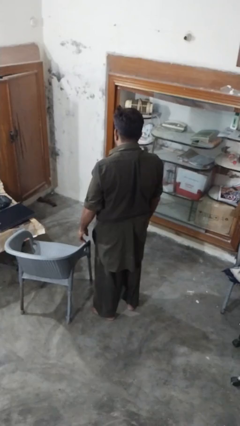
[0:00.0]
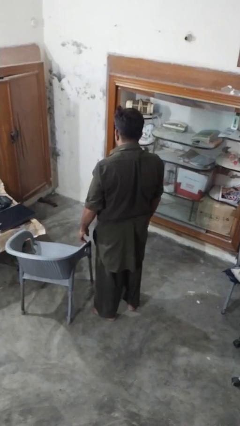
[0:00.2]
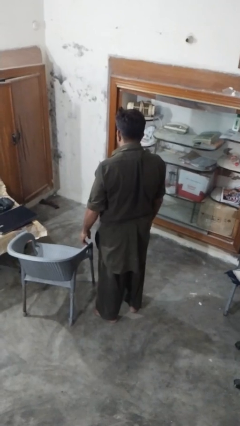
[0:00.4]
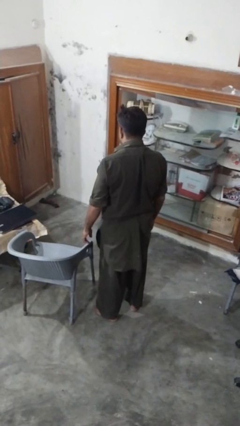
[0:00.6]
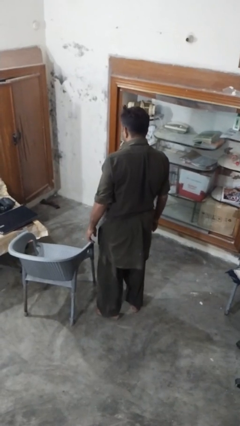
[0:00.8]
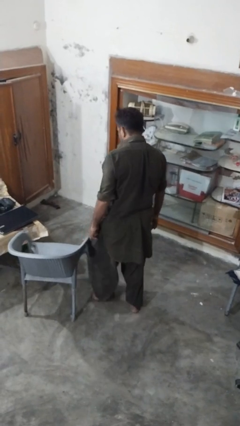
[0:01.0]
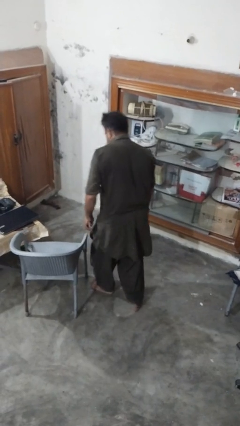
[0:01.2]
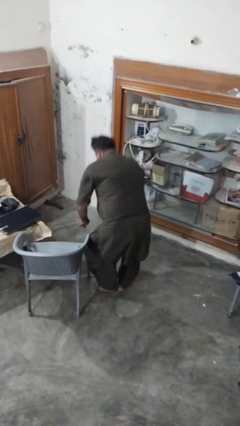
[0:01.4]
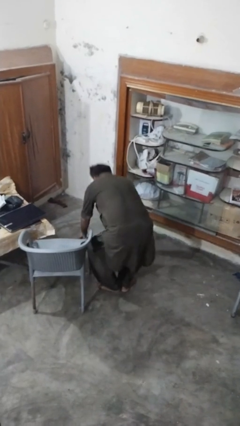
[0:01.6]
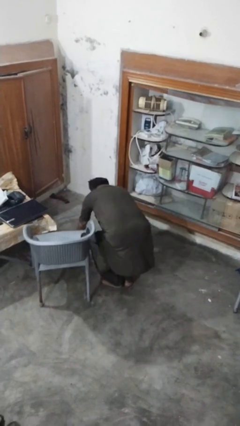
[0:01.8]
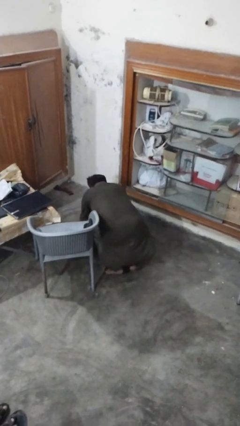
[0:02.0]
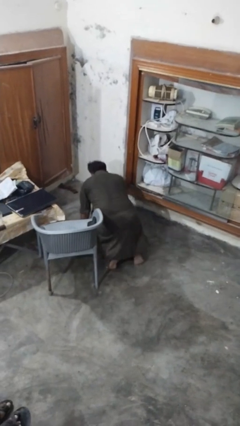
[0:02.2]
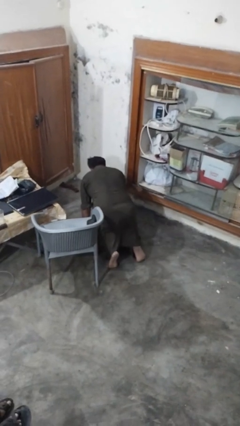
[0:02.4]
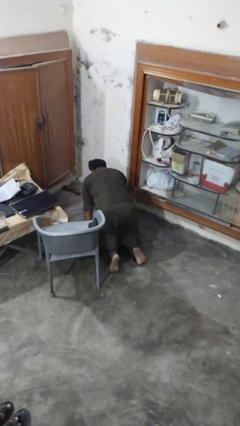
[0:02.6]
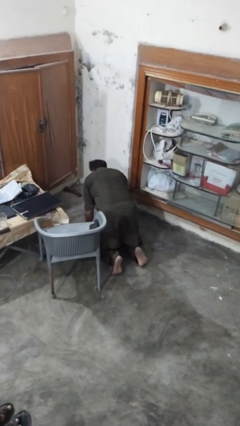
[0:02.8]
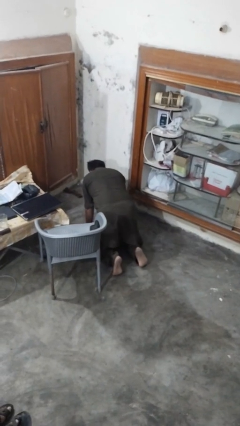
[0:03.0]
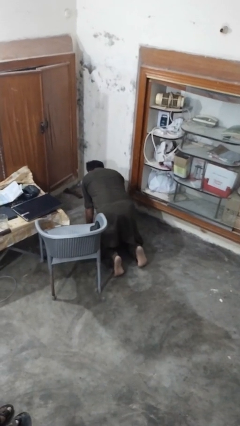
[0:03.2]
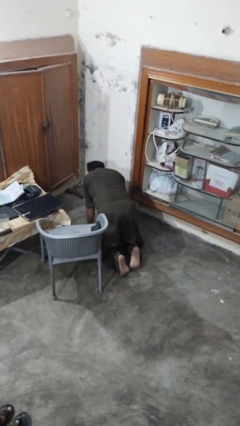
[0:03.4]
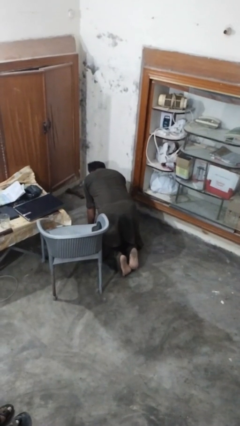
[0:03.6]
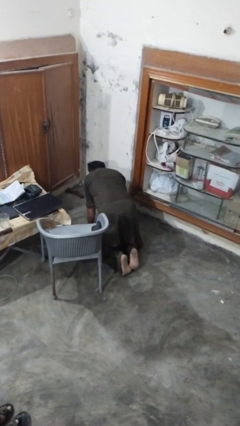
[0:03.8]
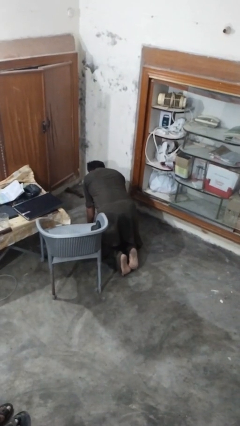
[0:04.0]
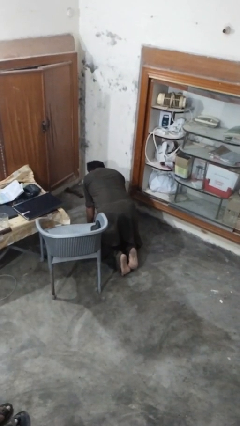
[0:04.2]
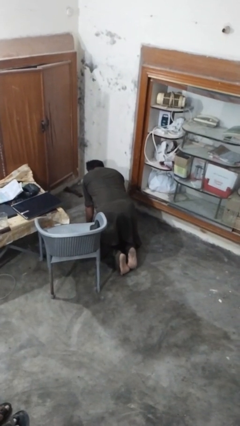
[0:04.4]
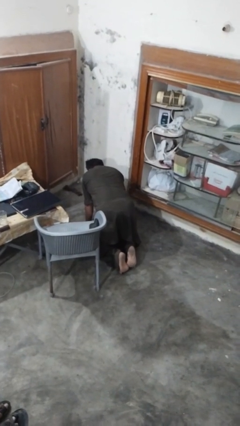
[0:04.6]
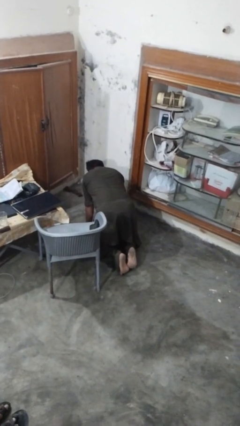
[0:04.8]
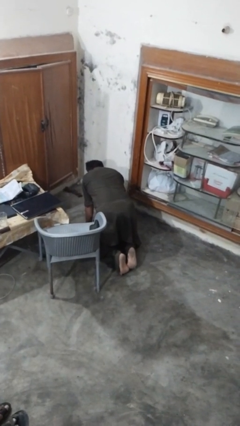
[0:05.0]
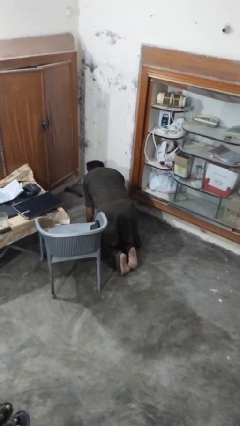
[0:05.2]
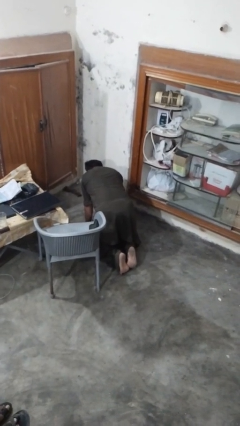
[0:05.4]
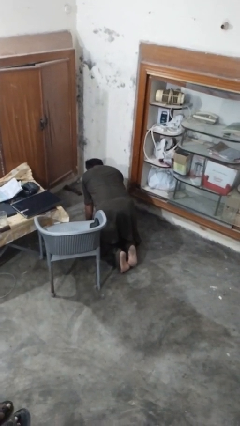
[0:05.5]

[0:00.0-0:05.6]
person trips on object on floor

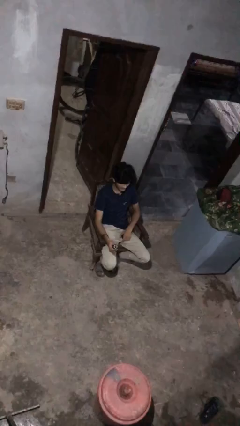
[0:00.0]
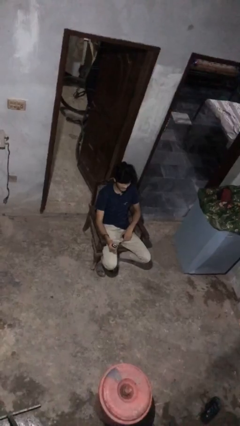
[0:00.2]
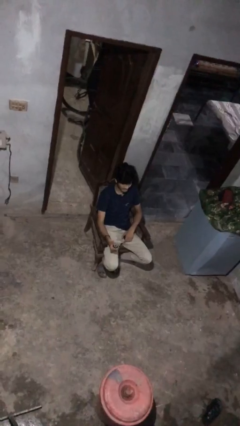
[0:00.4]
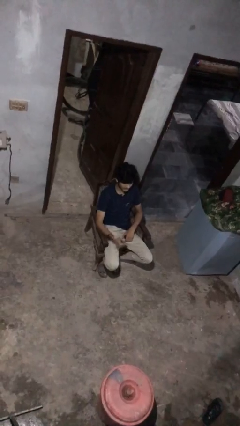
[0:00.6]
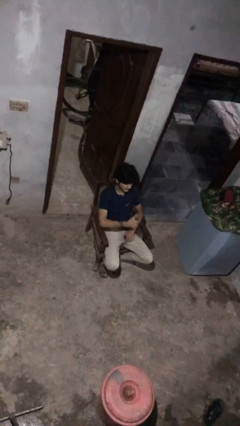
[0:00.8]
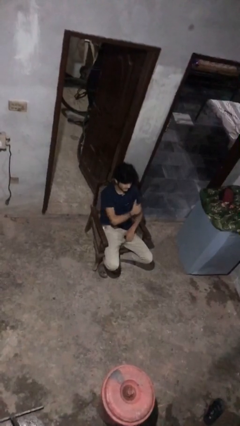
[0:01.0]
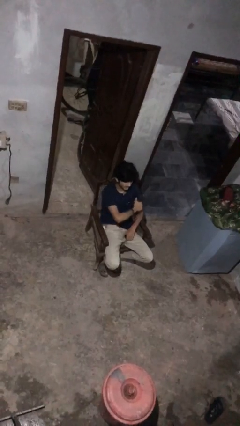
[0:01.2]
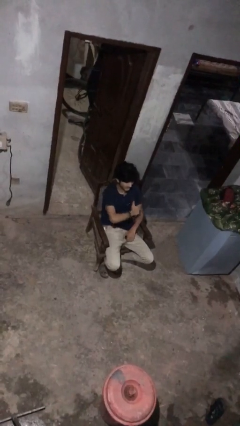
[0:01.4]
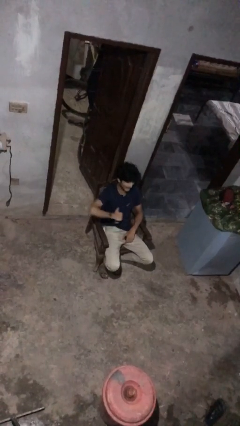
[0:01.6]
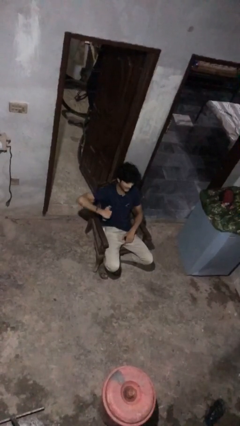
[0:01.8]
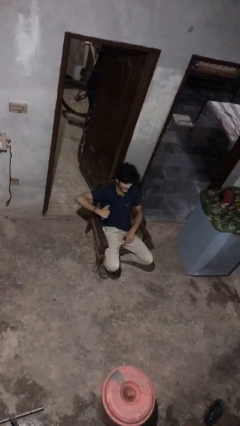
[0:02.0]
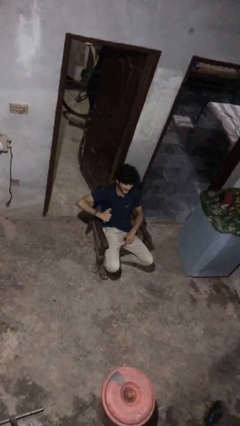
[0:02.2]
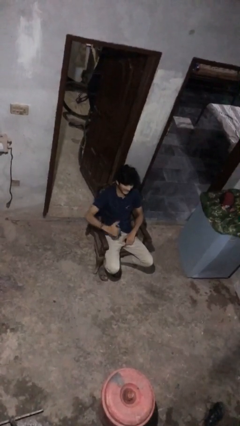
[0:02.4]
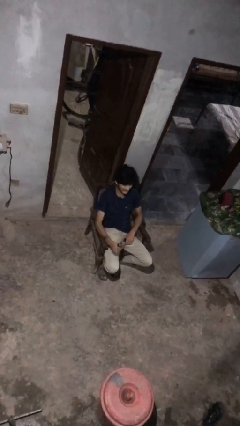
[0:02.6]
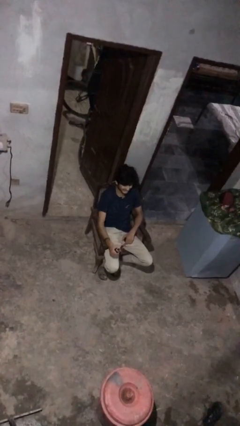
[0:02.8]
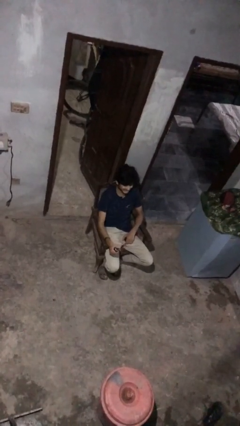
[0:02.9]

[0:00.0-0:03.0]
person applies deodorant

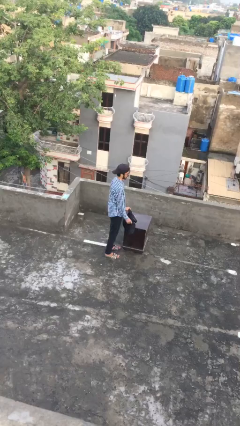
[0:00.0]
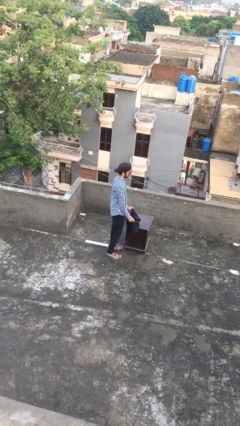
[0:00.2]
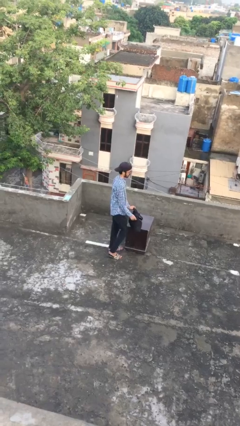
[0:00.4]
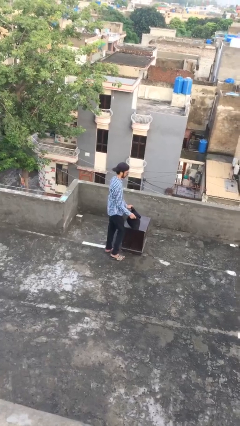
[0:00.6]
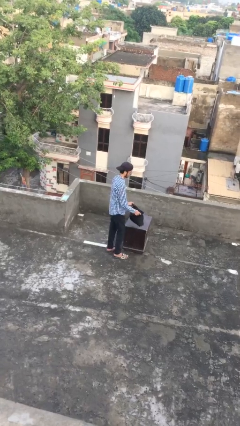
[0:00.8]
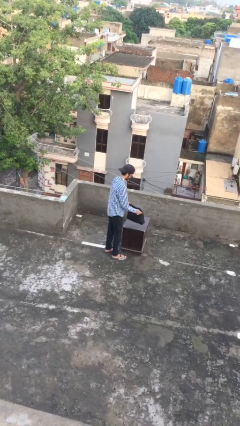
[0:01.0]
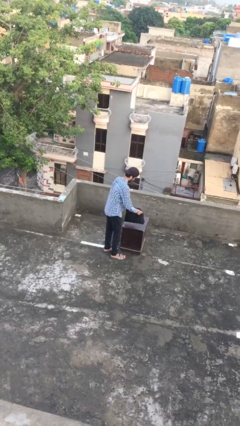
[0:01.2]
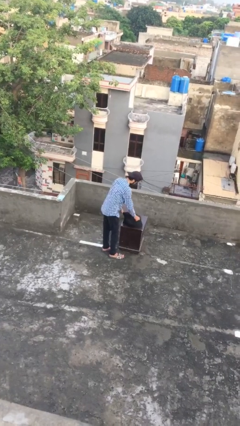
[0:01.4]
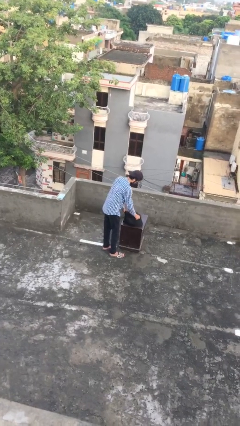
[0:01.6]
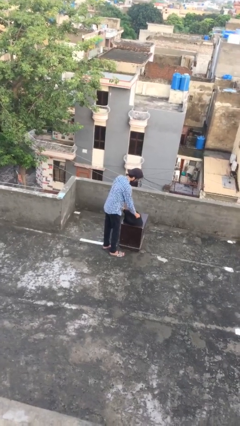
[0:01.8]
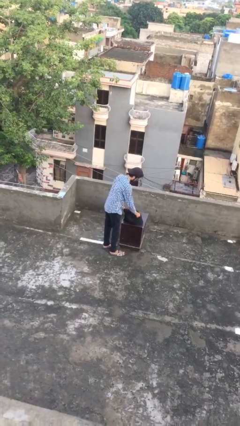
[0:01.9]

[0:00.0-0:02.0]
person puts down object on table

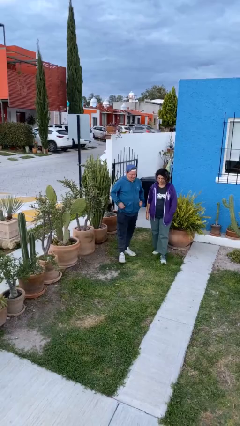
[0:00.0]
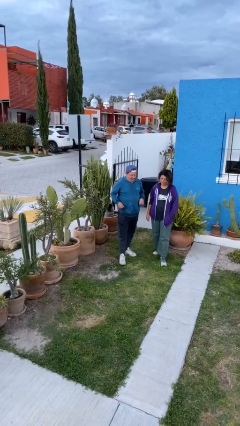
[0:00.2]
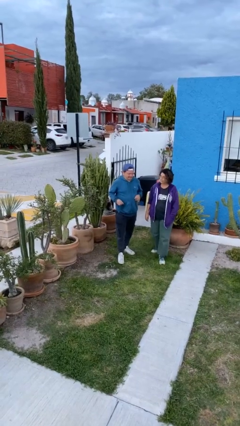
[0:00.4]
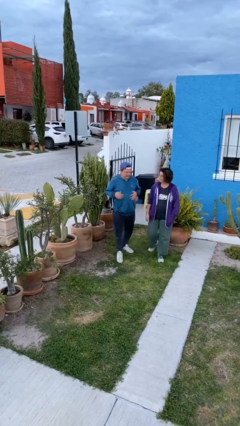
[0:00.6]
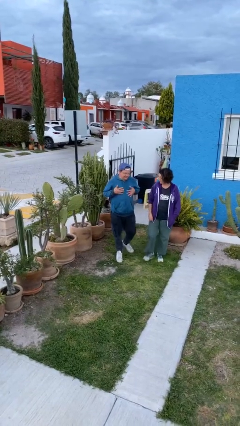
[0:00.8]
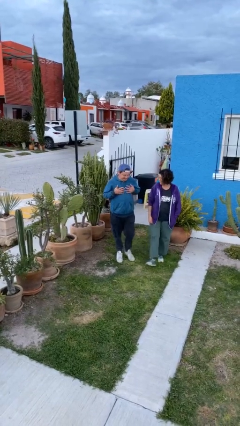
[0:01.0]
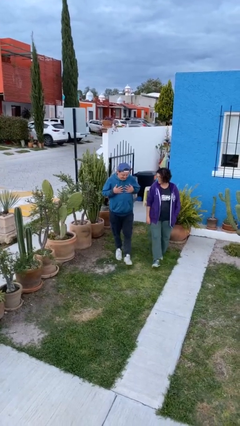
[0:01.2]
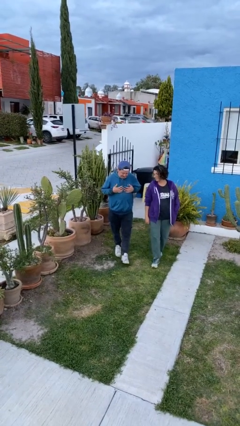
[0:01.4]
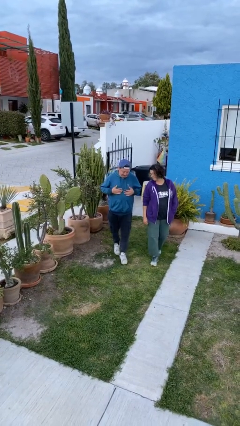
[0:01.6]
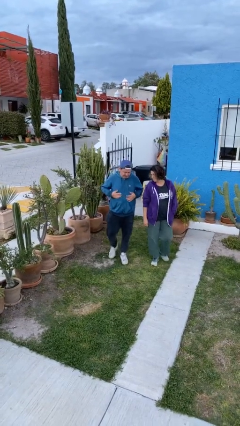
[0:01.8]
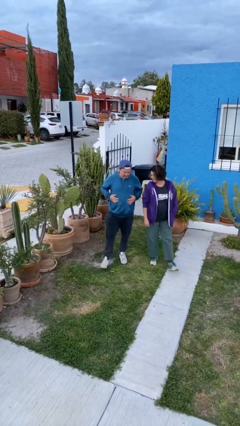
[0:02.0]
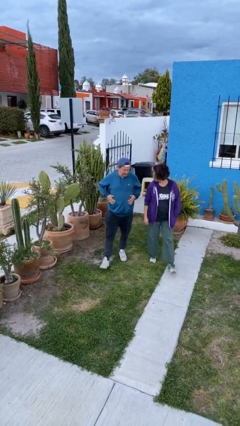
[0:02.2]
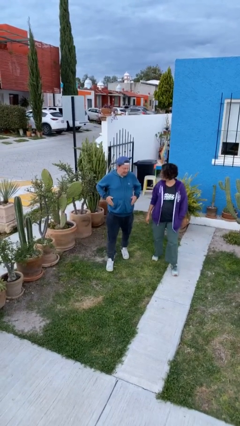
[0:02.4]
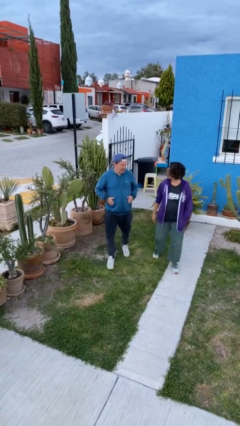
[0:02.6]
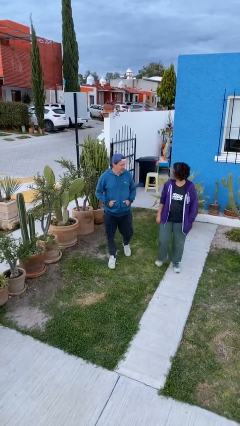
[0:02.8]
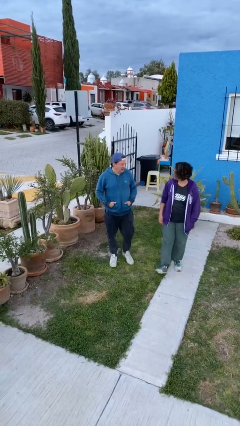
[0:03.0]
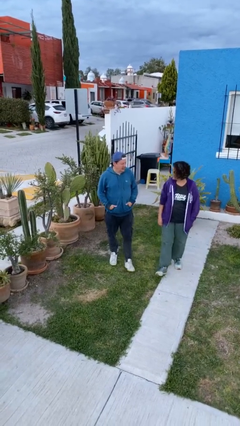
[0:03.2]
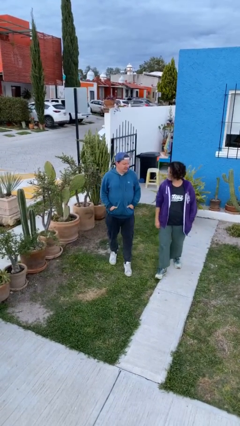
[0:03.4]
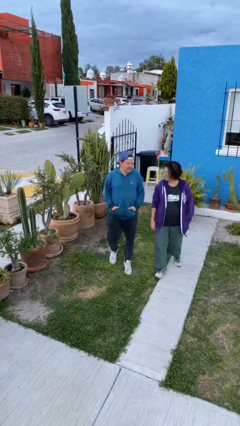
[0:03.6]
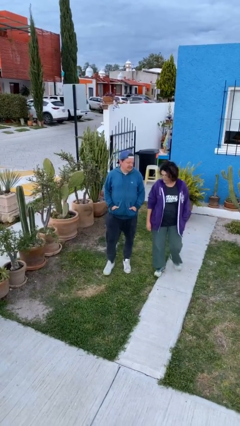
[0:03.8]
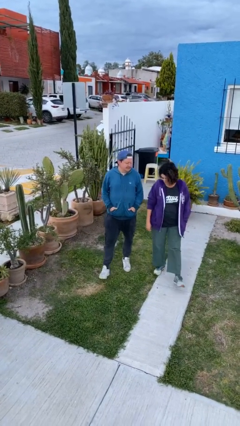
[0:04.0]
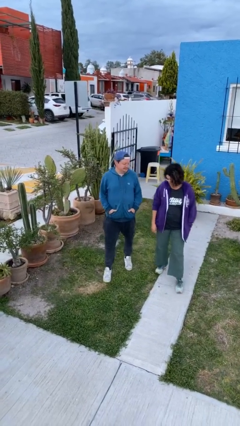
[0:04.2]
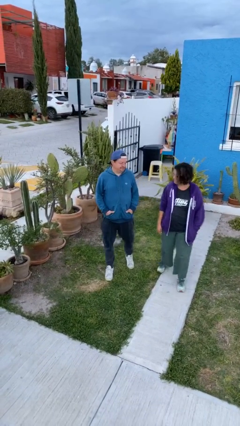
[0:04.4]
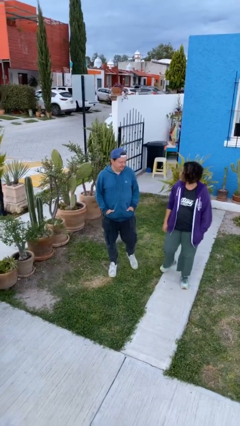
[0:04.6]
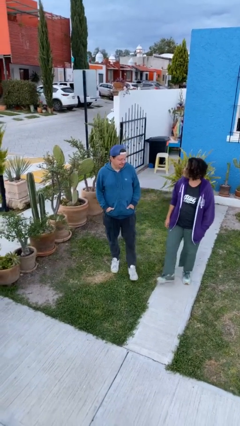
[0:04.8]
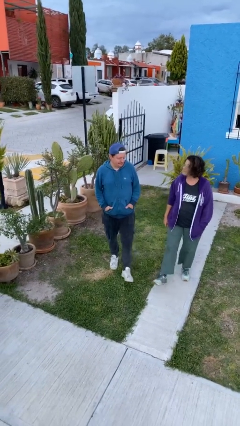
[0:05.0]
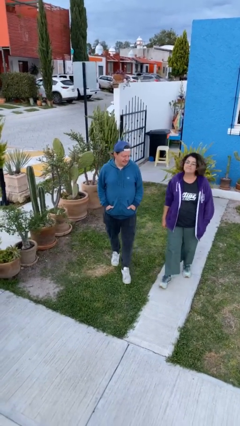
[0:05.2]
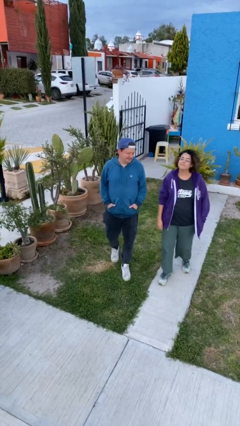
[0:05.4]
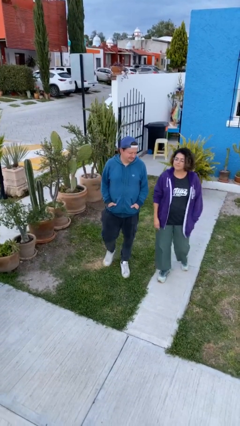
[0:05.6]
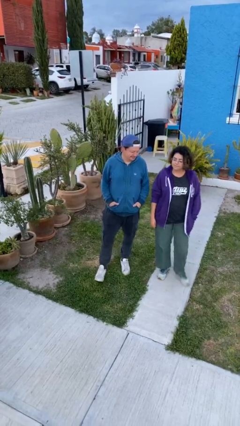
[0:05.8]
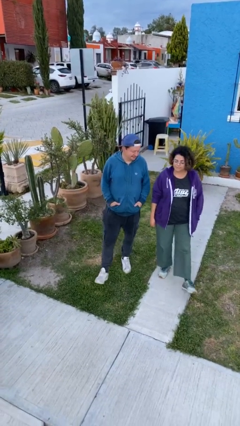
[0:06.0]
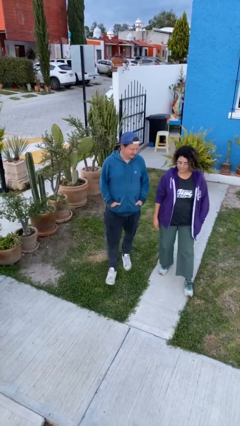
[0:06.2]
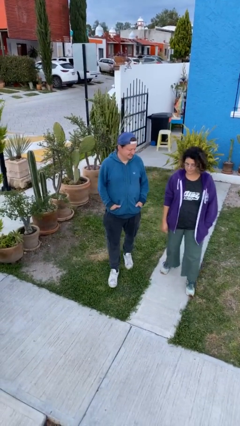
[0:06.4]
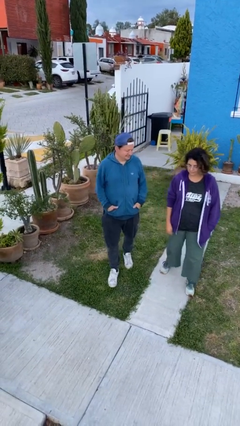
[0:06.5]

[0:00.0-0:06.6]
person talks to person

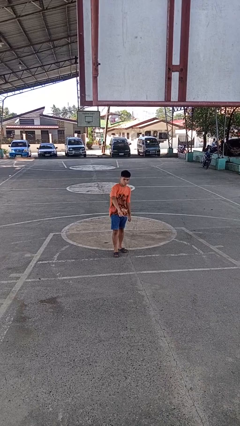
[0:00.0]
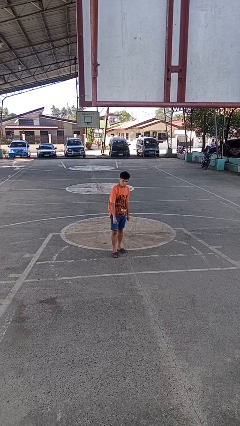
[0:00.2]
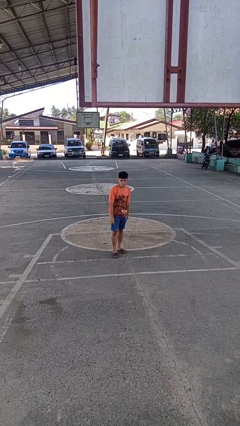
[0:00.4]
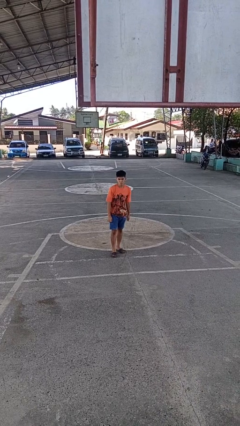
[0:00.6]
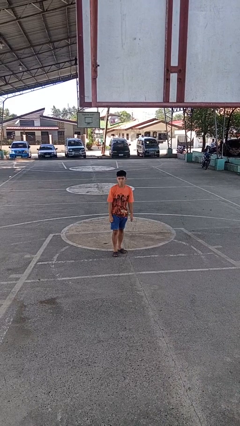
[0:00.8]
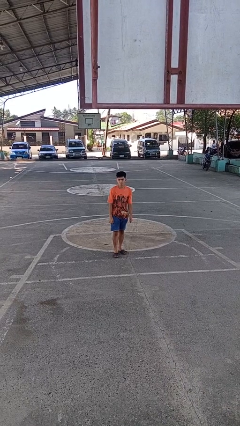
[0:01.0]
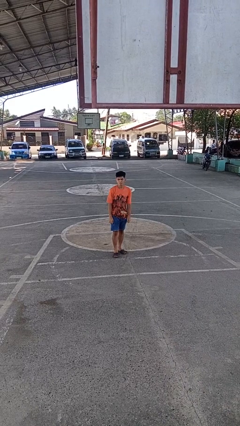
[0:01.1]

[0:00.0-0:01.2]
person gestures swipe down
